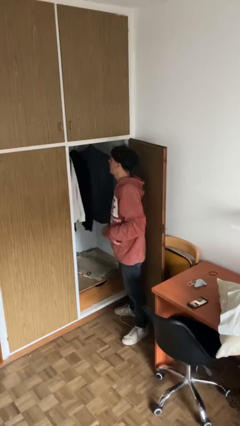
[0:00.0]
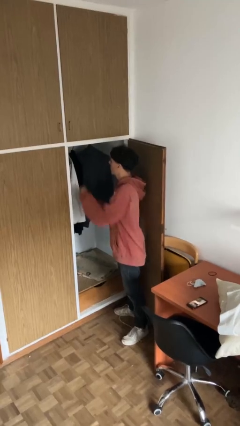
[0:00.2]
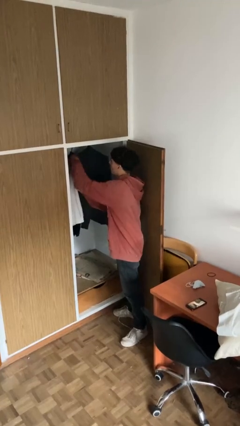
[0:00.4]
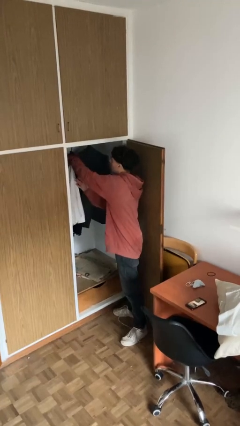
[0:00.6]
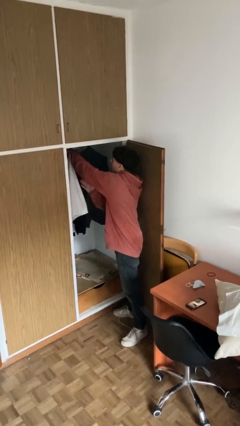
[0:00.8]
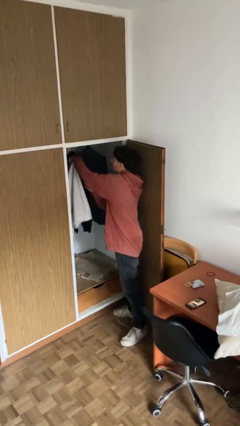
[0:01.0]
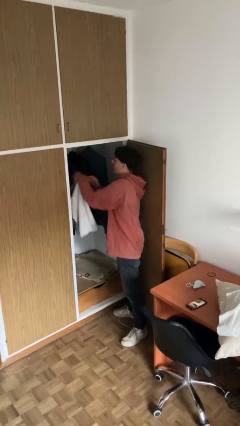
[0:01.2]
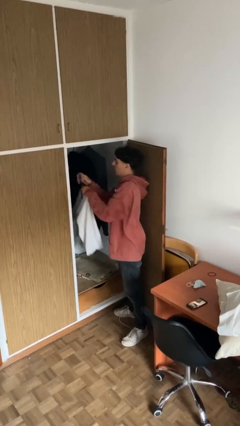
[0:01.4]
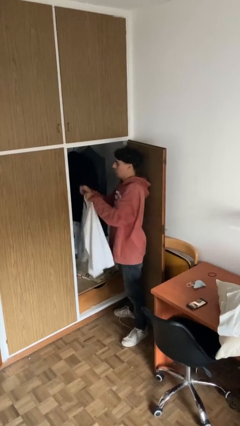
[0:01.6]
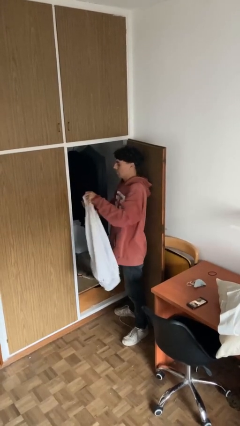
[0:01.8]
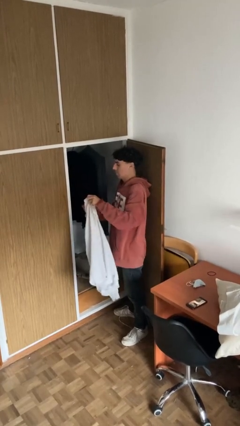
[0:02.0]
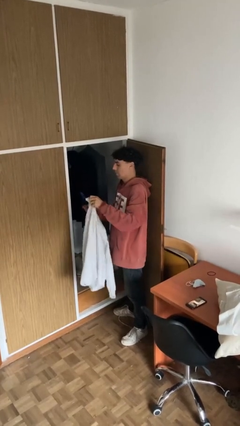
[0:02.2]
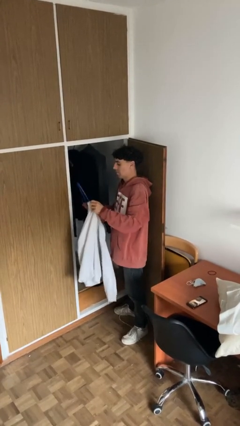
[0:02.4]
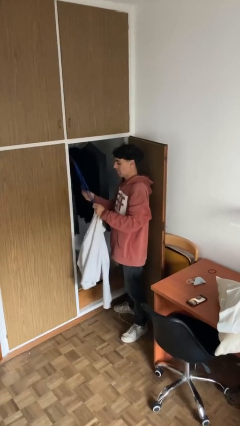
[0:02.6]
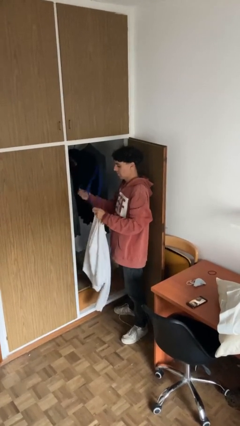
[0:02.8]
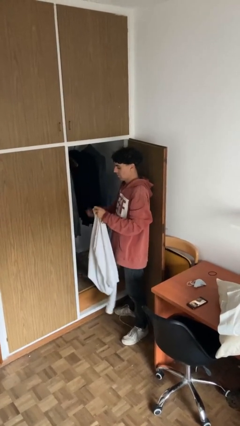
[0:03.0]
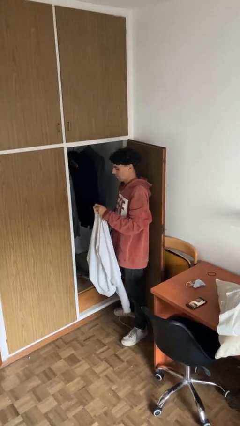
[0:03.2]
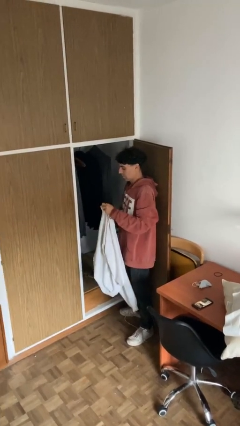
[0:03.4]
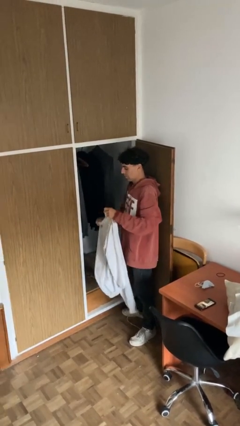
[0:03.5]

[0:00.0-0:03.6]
person takes clothes from closet

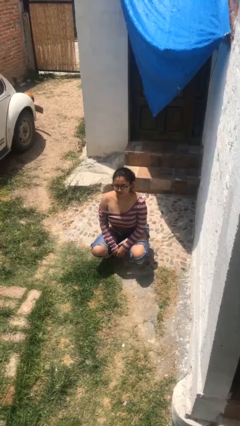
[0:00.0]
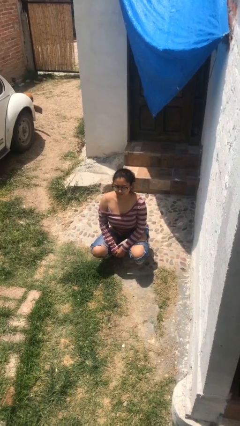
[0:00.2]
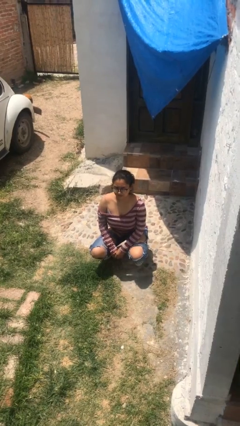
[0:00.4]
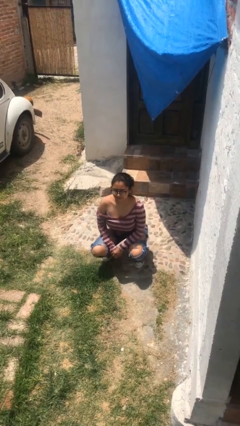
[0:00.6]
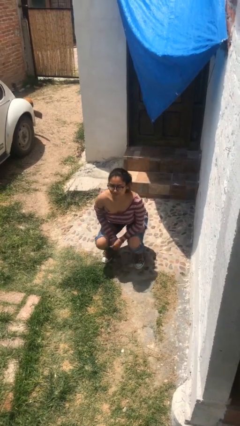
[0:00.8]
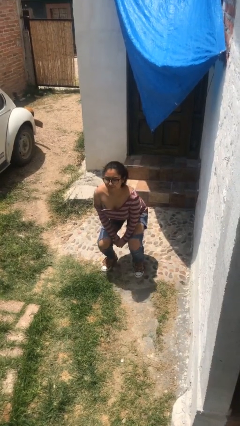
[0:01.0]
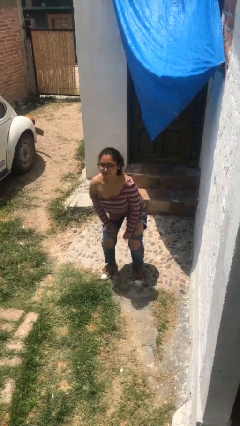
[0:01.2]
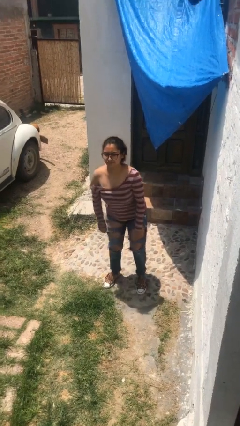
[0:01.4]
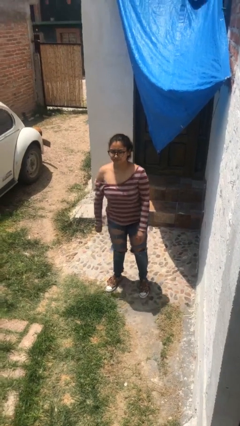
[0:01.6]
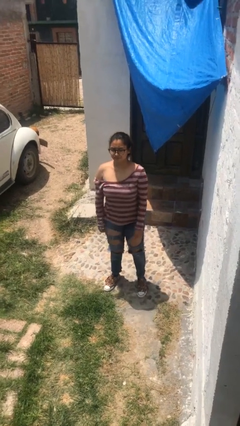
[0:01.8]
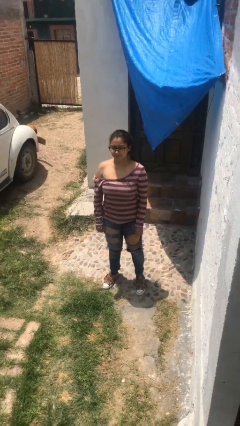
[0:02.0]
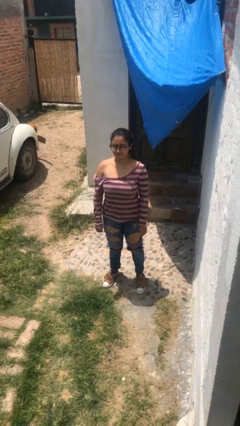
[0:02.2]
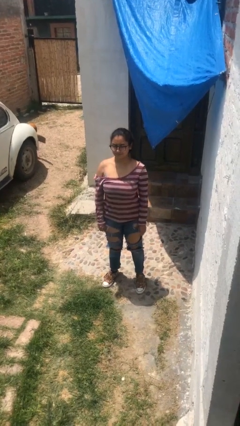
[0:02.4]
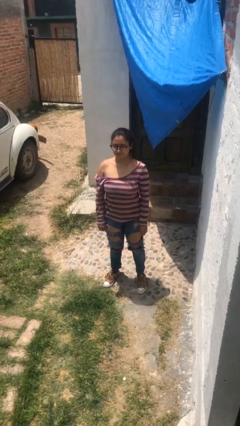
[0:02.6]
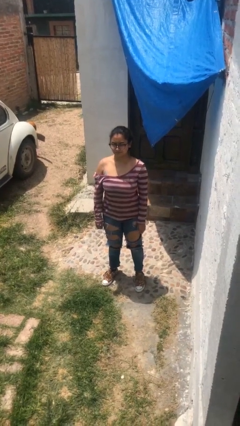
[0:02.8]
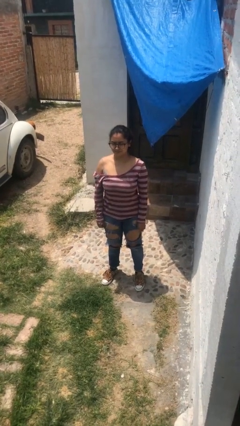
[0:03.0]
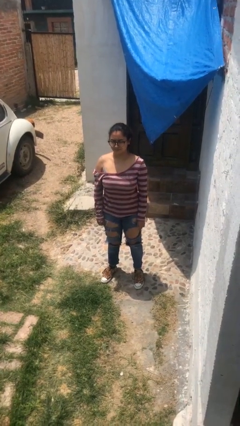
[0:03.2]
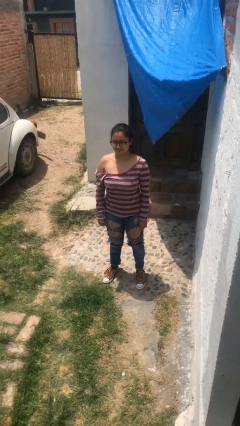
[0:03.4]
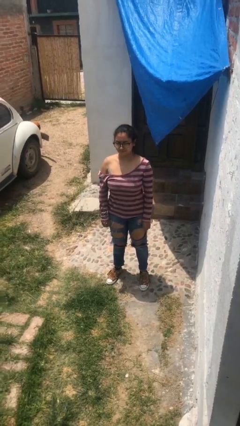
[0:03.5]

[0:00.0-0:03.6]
person stands up

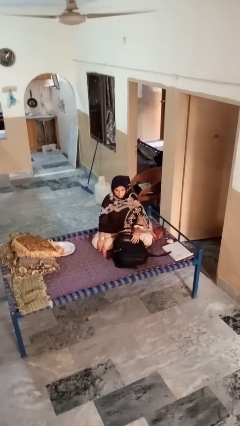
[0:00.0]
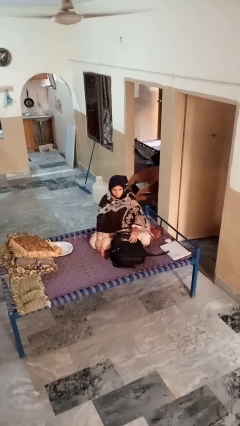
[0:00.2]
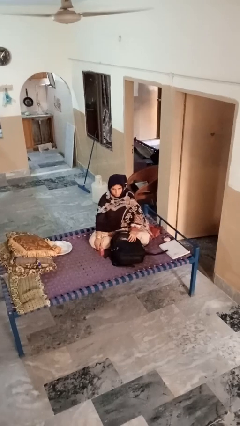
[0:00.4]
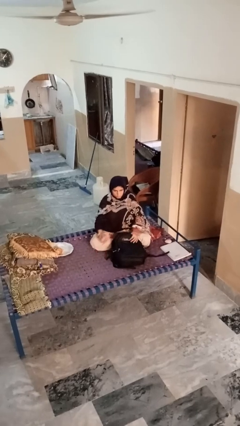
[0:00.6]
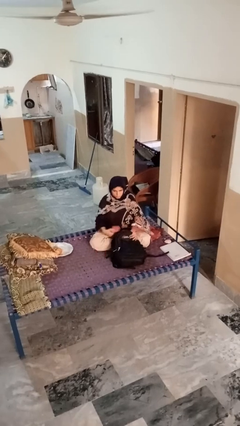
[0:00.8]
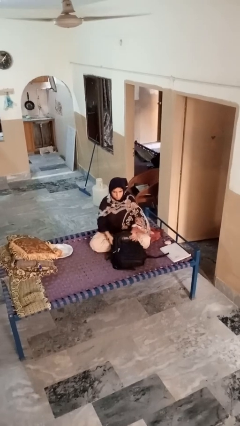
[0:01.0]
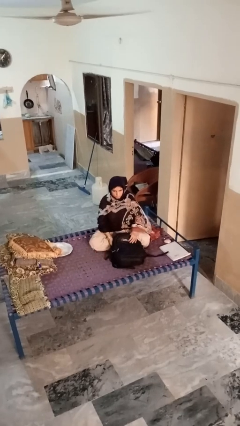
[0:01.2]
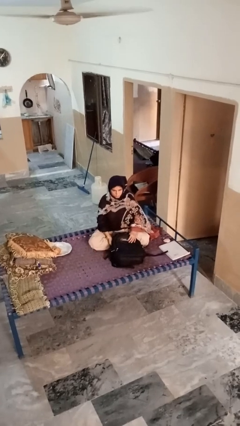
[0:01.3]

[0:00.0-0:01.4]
person puts object into bag

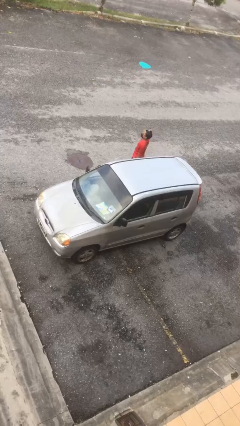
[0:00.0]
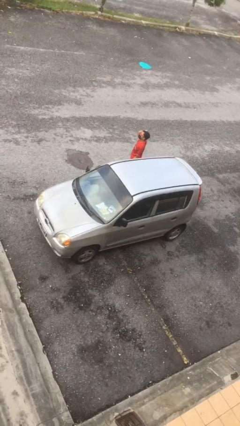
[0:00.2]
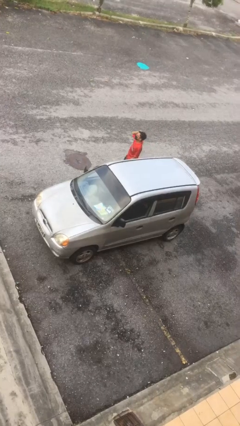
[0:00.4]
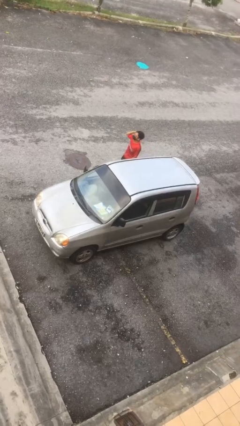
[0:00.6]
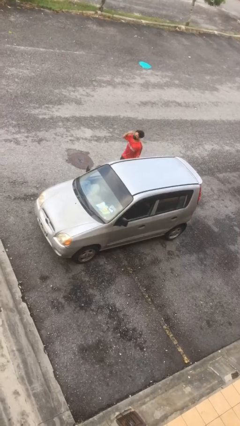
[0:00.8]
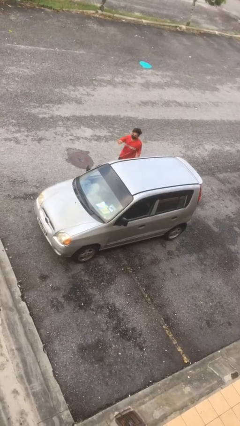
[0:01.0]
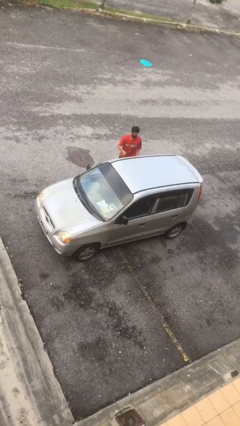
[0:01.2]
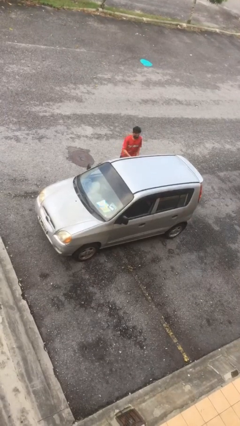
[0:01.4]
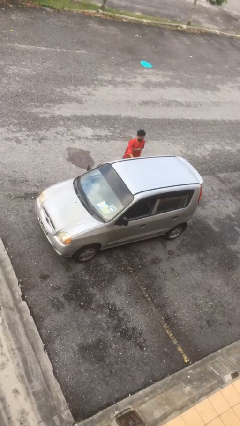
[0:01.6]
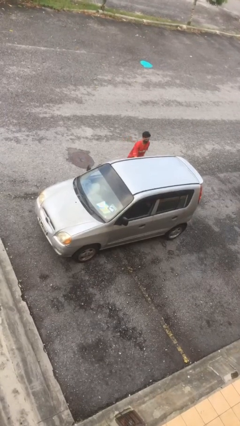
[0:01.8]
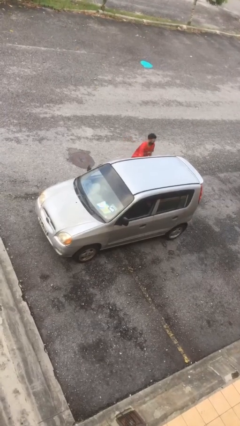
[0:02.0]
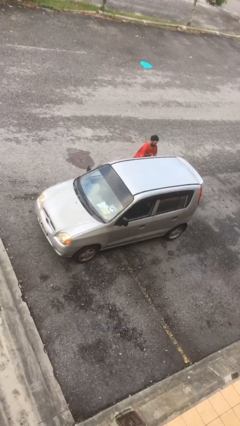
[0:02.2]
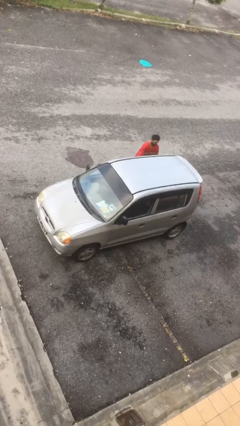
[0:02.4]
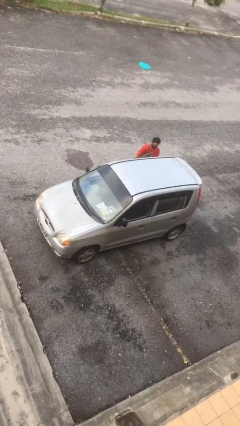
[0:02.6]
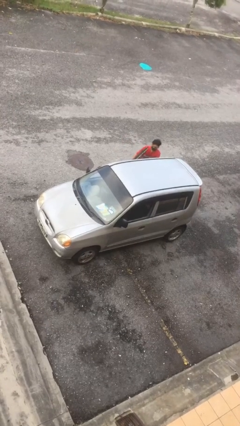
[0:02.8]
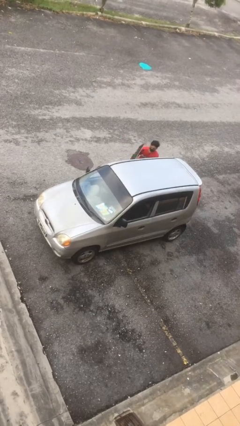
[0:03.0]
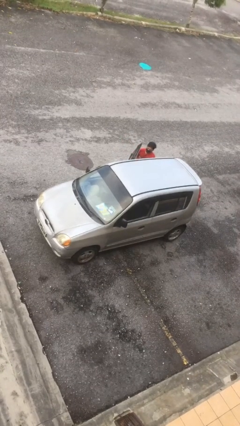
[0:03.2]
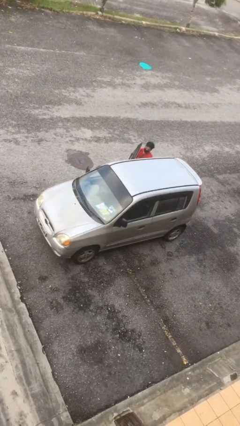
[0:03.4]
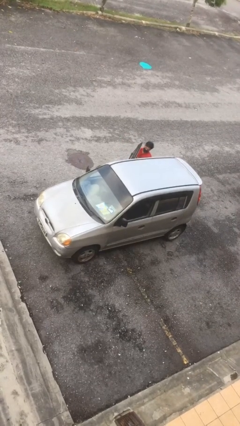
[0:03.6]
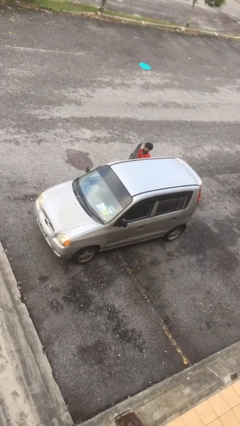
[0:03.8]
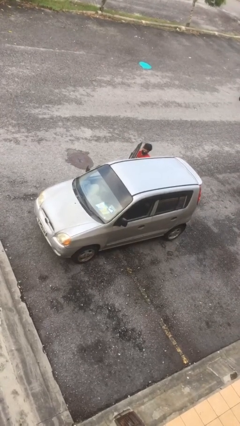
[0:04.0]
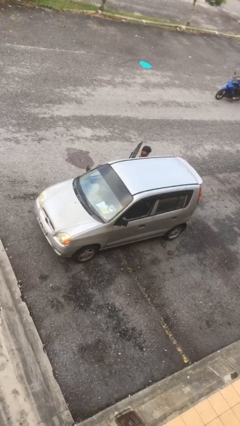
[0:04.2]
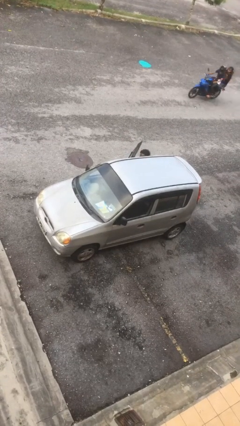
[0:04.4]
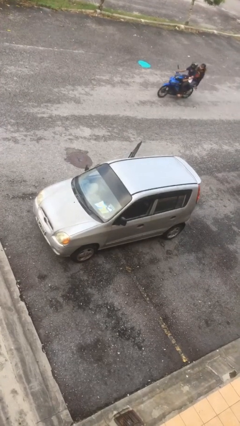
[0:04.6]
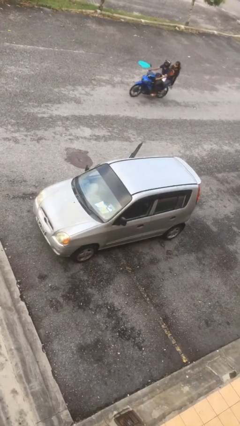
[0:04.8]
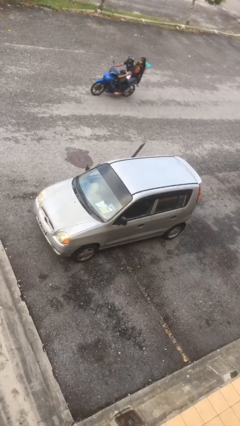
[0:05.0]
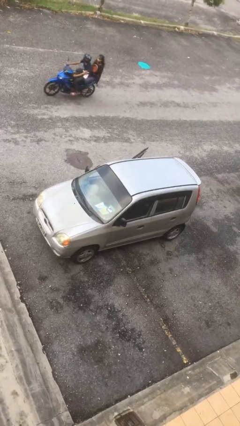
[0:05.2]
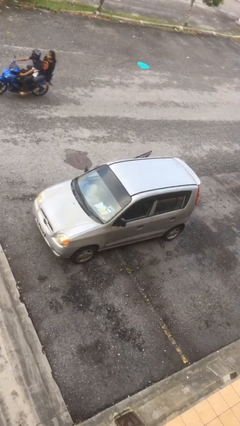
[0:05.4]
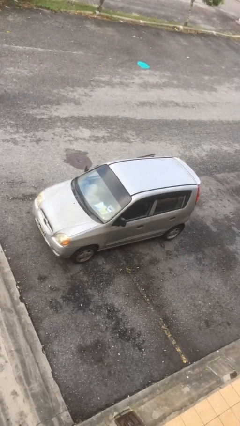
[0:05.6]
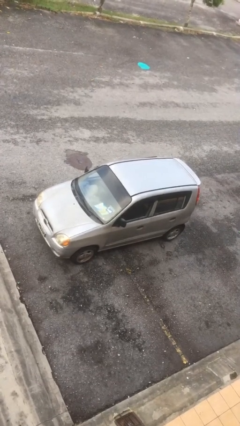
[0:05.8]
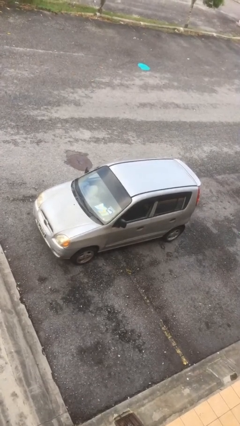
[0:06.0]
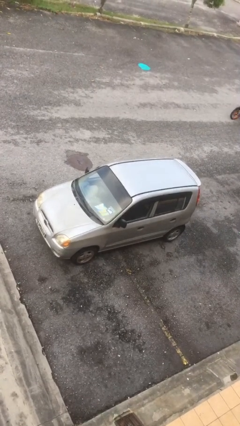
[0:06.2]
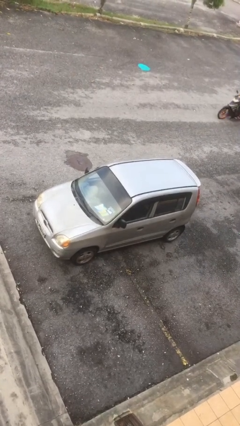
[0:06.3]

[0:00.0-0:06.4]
car picks up person

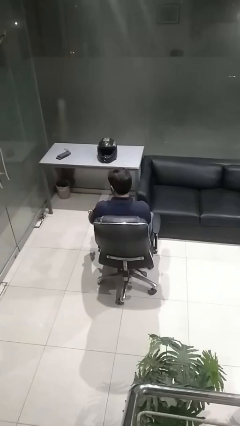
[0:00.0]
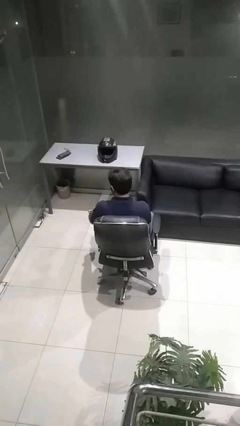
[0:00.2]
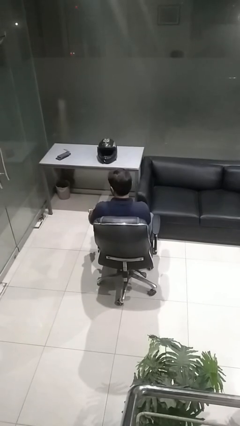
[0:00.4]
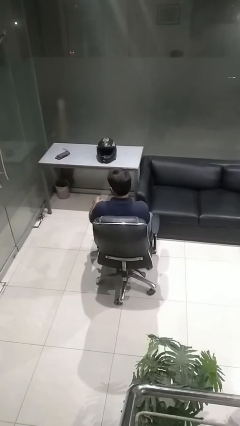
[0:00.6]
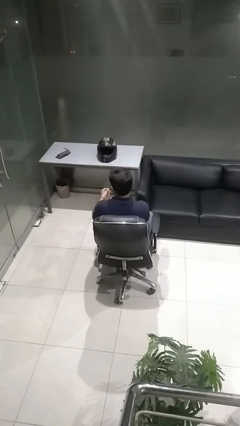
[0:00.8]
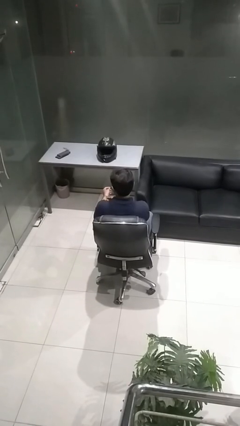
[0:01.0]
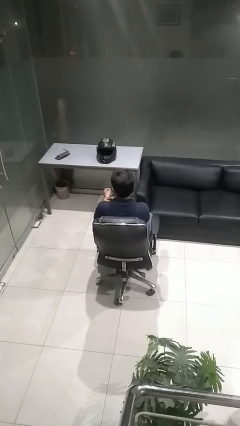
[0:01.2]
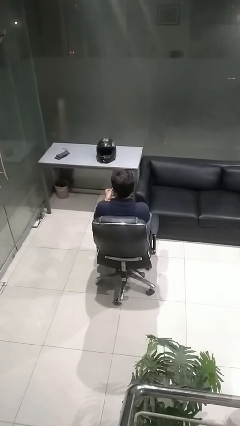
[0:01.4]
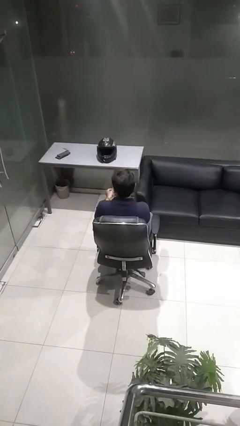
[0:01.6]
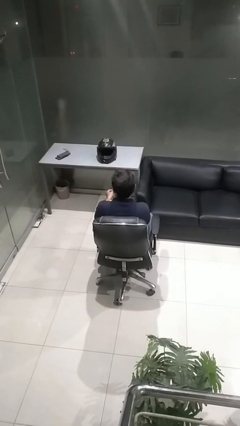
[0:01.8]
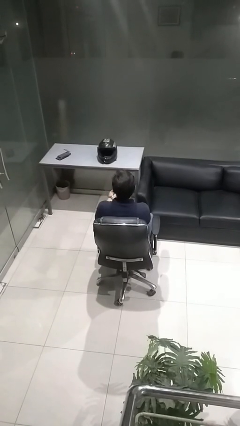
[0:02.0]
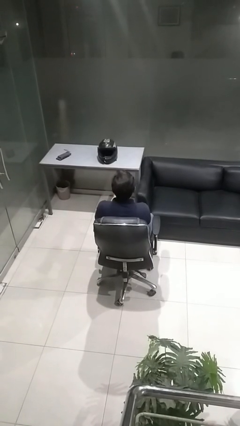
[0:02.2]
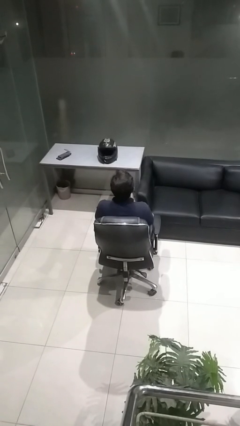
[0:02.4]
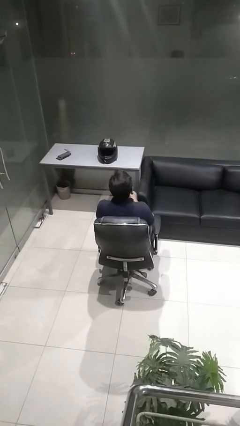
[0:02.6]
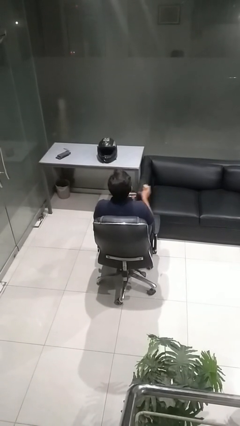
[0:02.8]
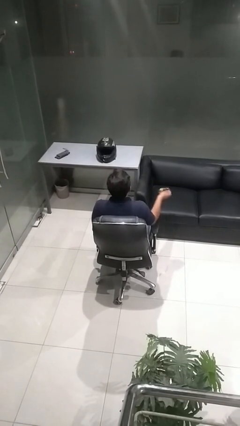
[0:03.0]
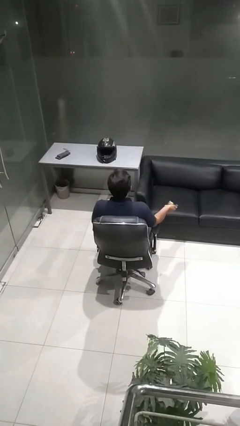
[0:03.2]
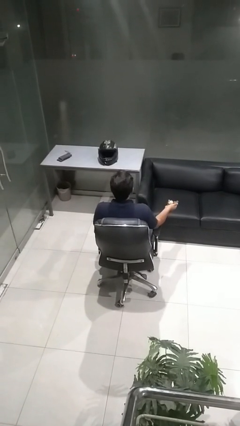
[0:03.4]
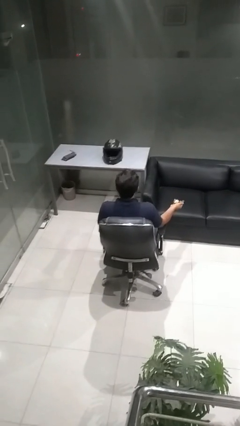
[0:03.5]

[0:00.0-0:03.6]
person takes off wristwatch
